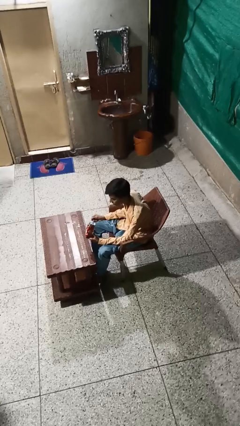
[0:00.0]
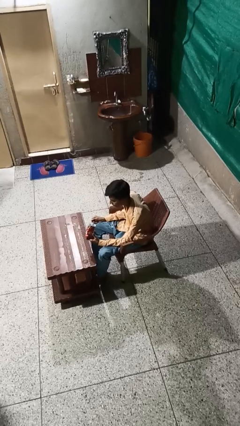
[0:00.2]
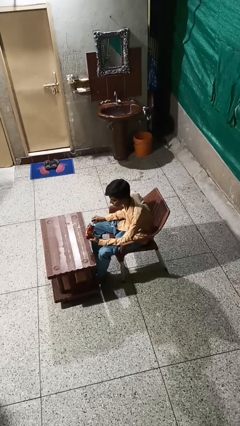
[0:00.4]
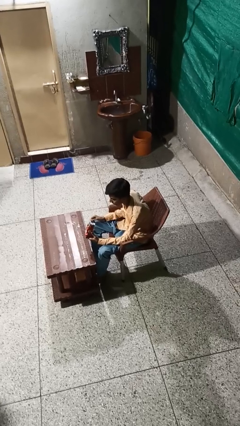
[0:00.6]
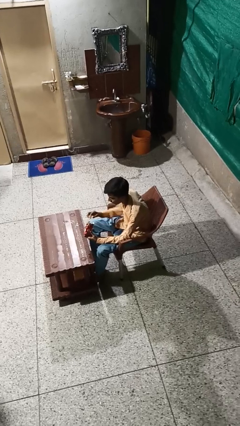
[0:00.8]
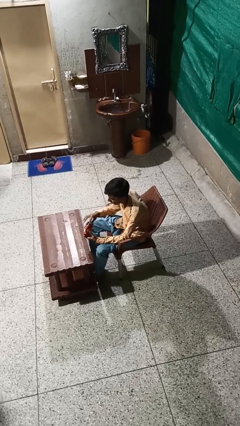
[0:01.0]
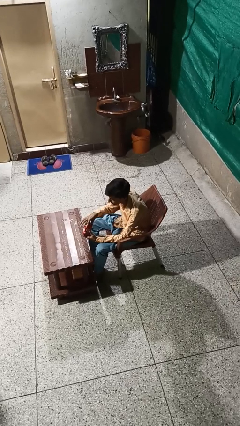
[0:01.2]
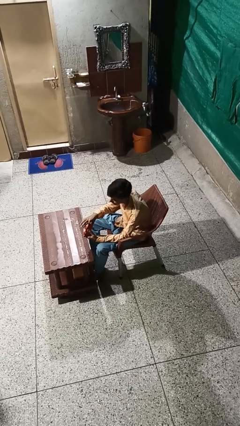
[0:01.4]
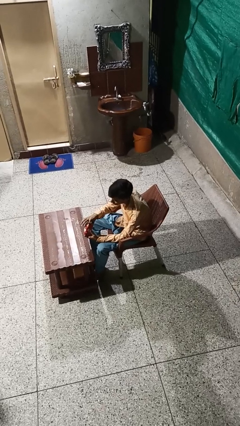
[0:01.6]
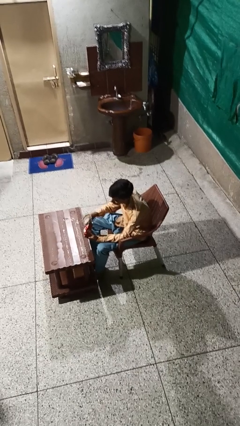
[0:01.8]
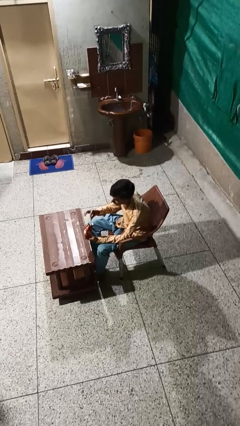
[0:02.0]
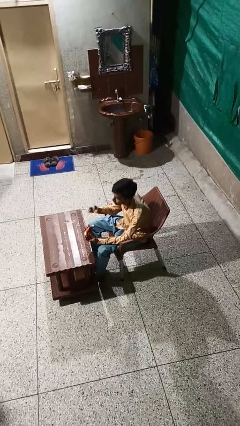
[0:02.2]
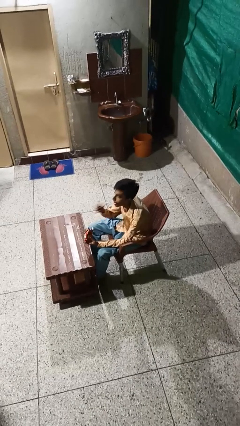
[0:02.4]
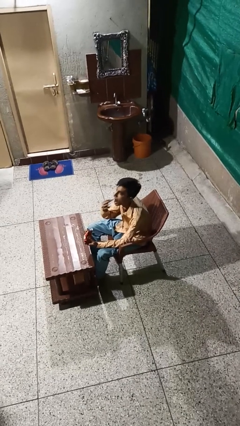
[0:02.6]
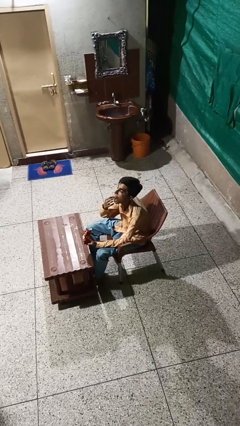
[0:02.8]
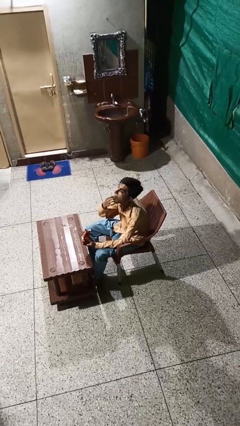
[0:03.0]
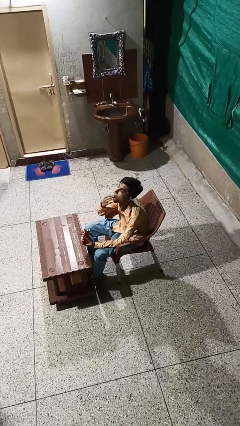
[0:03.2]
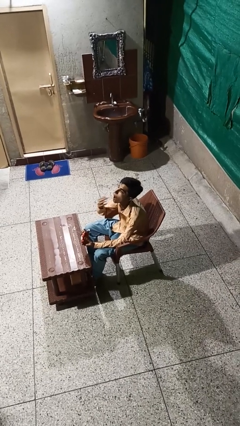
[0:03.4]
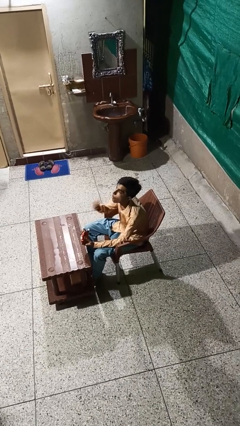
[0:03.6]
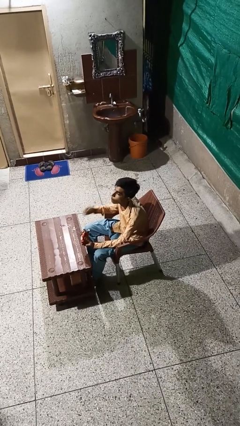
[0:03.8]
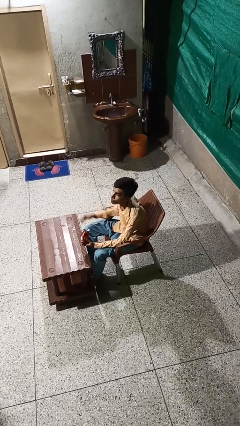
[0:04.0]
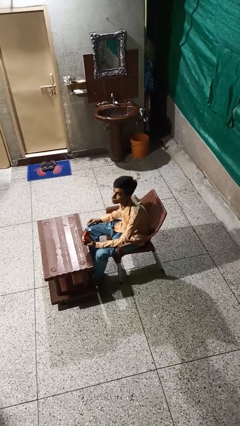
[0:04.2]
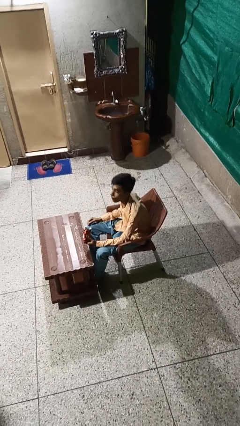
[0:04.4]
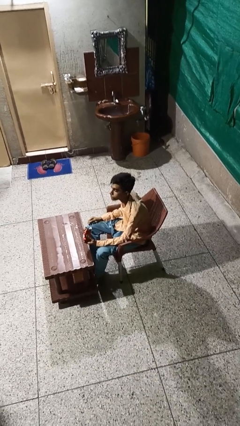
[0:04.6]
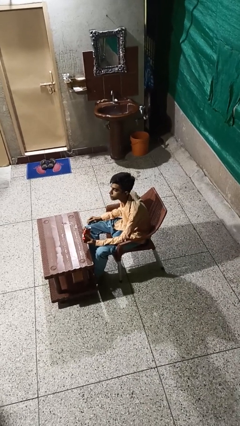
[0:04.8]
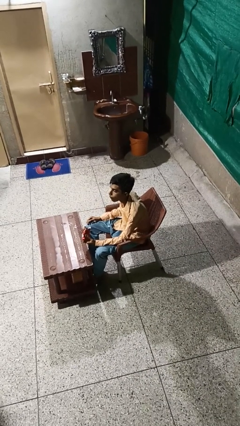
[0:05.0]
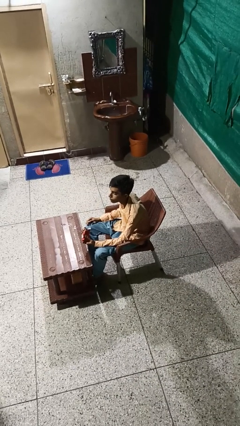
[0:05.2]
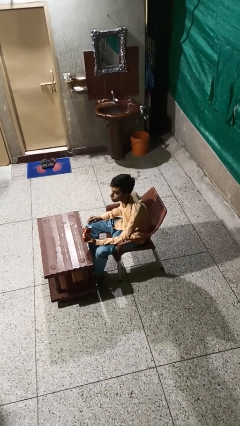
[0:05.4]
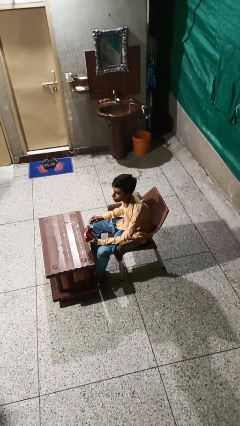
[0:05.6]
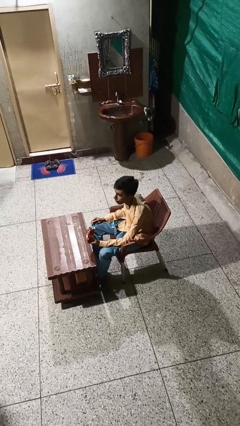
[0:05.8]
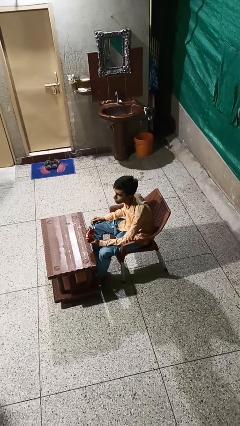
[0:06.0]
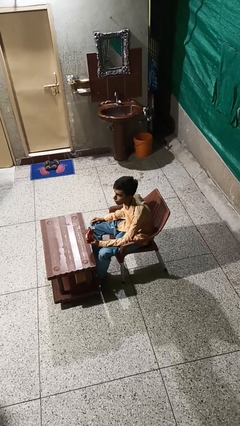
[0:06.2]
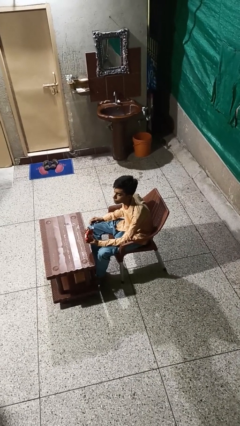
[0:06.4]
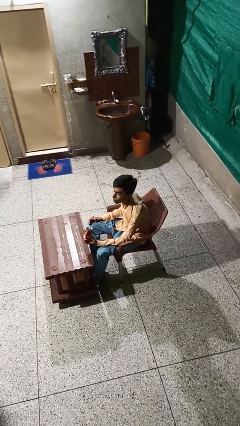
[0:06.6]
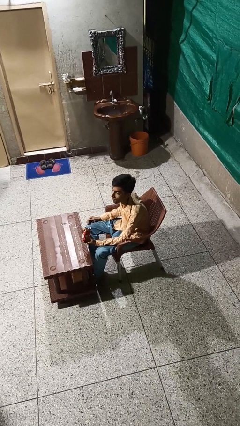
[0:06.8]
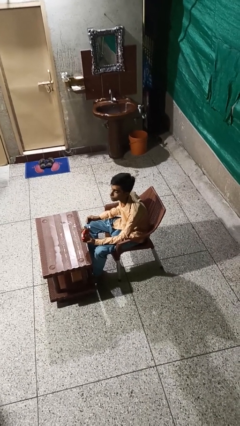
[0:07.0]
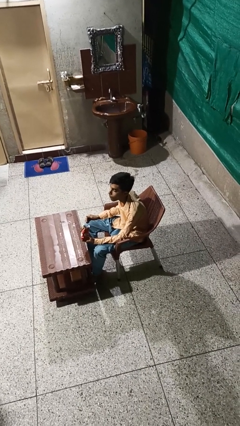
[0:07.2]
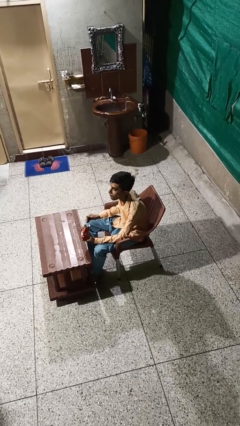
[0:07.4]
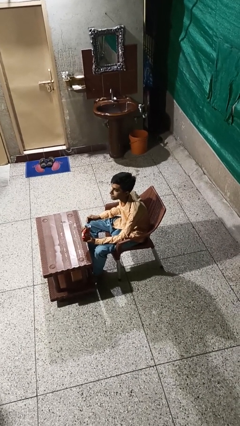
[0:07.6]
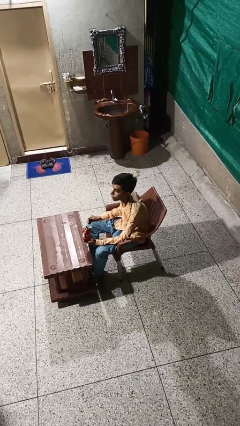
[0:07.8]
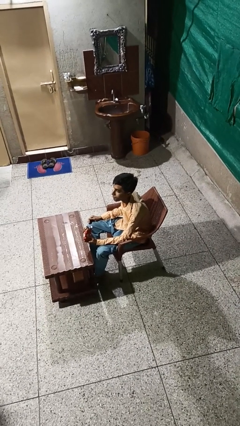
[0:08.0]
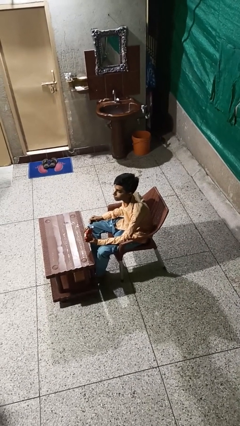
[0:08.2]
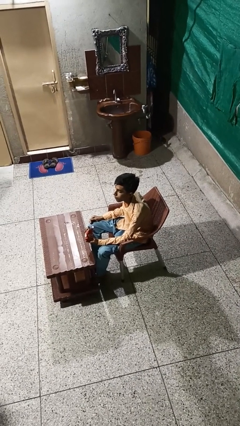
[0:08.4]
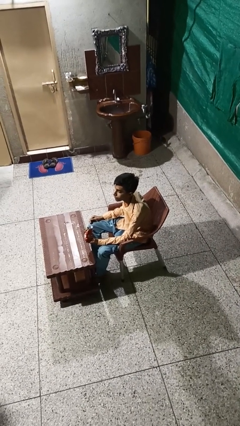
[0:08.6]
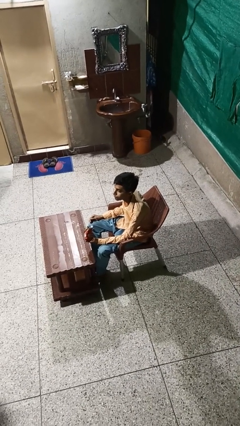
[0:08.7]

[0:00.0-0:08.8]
person eats snack from bag

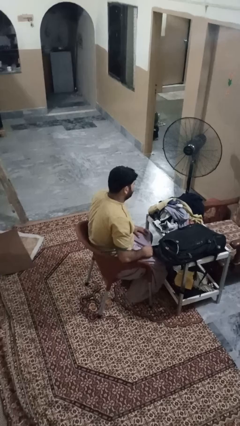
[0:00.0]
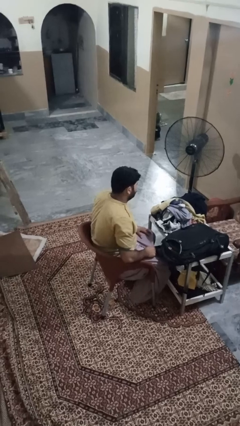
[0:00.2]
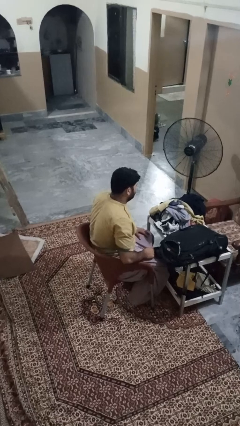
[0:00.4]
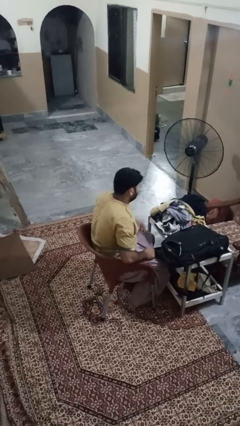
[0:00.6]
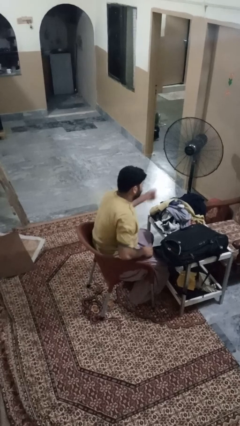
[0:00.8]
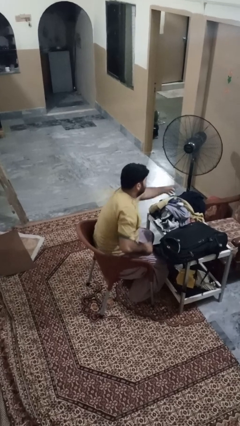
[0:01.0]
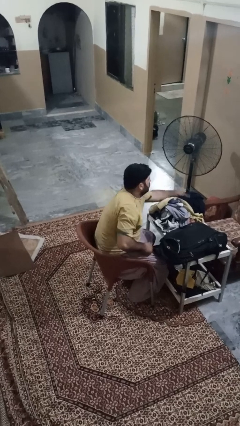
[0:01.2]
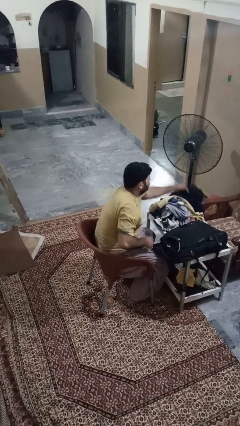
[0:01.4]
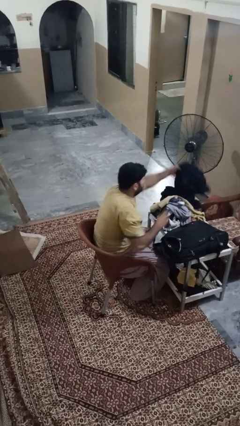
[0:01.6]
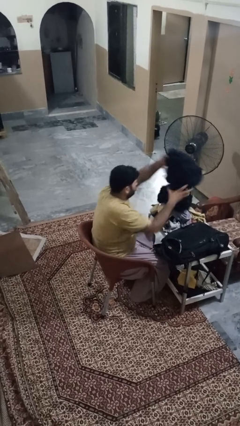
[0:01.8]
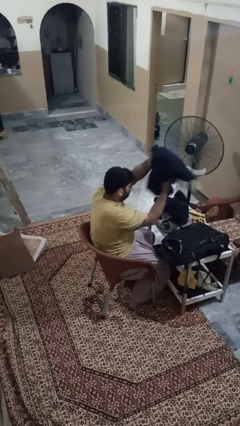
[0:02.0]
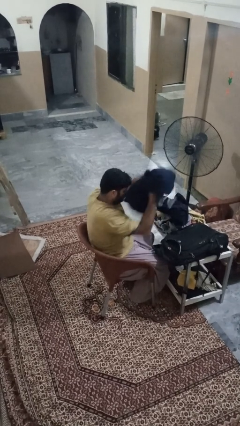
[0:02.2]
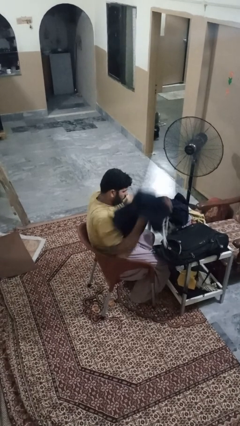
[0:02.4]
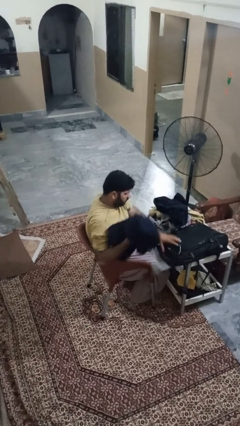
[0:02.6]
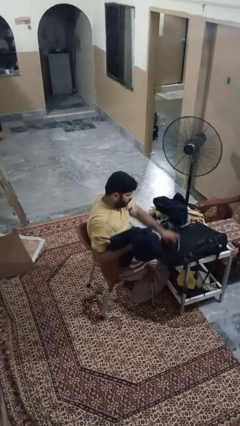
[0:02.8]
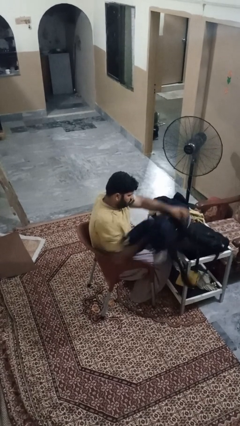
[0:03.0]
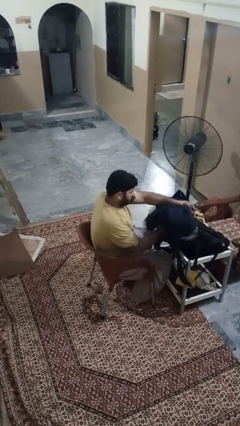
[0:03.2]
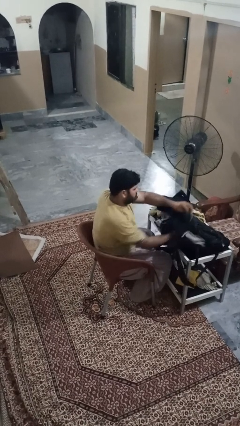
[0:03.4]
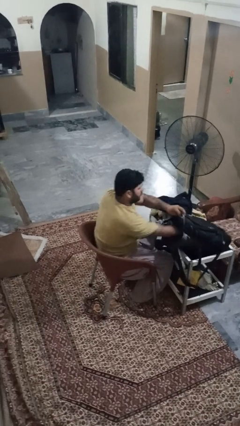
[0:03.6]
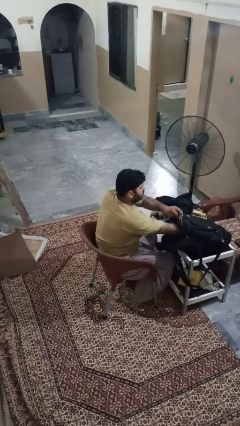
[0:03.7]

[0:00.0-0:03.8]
person loads clothes into suitcase

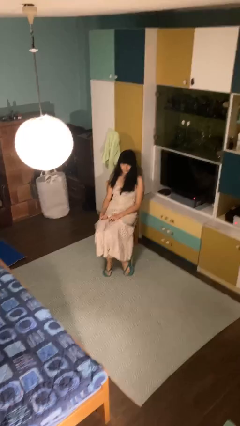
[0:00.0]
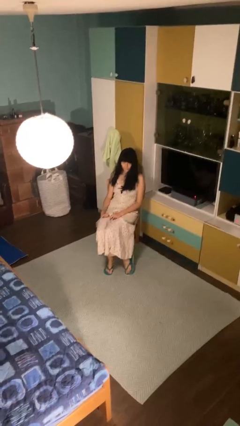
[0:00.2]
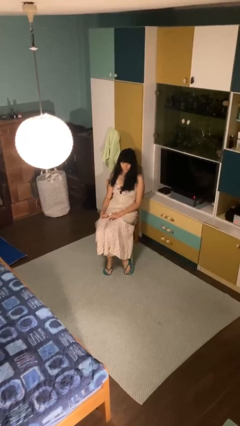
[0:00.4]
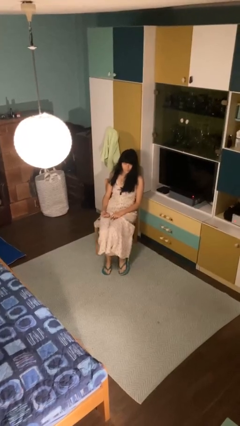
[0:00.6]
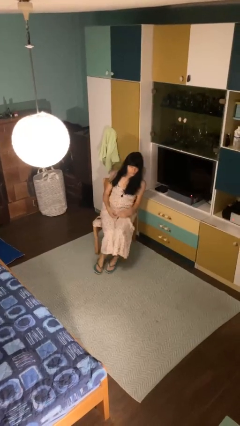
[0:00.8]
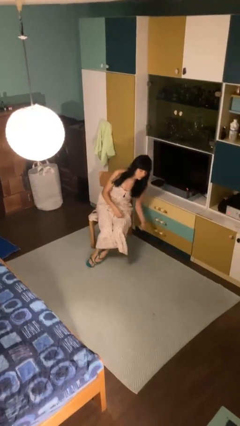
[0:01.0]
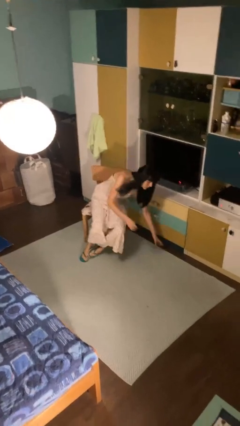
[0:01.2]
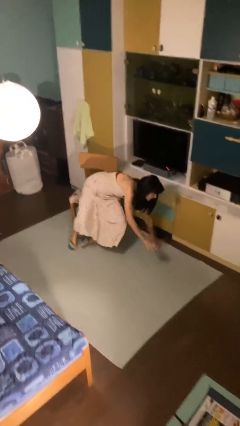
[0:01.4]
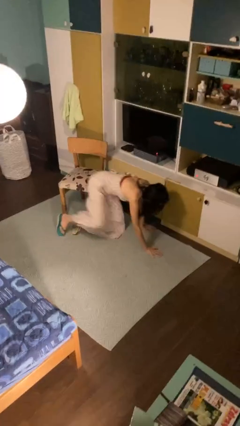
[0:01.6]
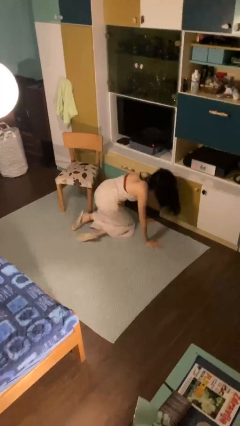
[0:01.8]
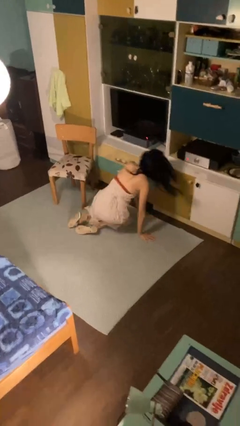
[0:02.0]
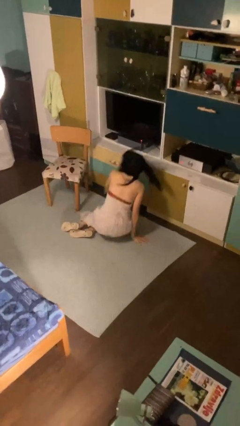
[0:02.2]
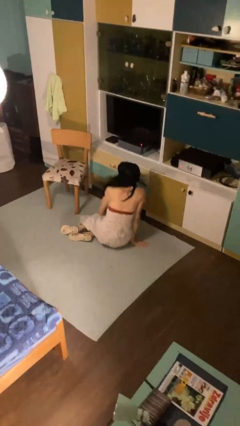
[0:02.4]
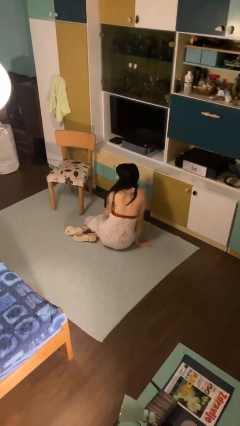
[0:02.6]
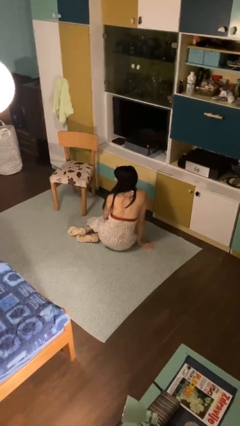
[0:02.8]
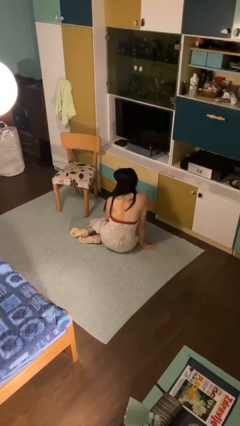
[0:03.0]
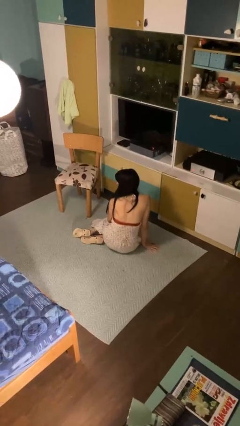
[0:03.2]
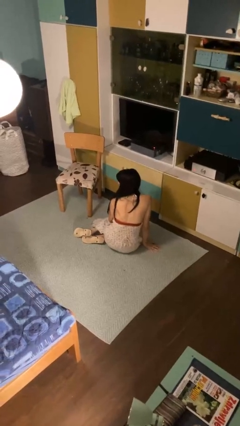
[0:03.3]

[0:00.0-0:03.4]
person falls from chair

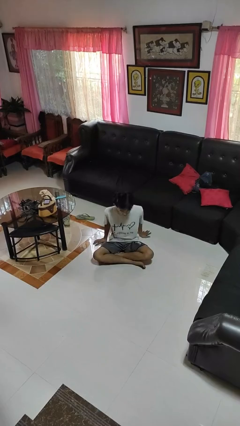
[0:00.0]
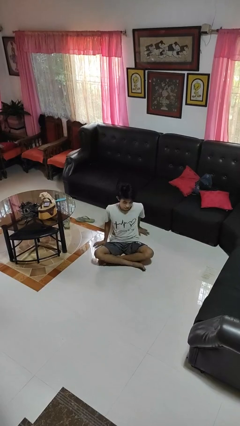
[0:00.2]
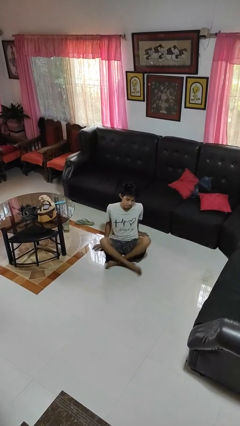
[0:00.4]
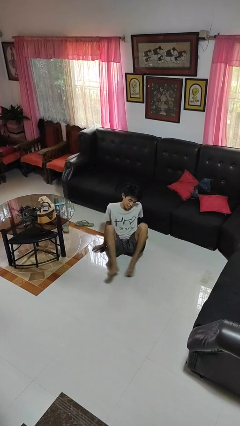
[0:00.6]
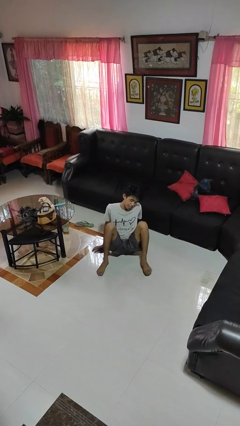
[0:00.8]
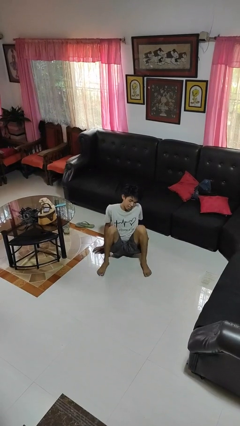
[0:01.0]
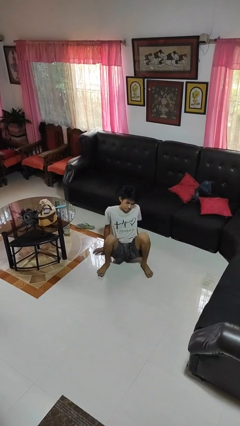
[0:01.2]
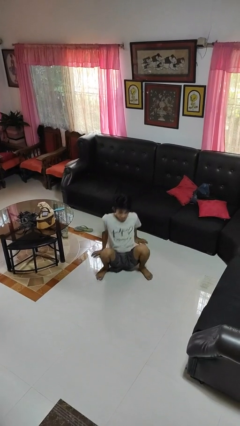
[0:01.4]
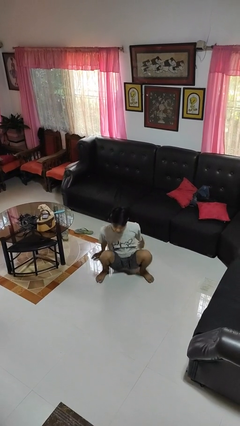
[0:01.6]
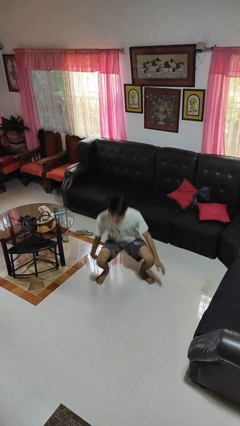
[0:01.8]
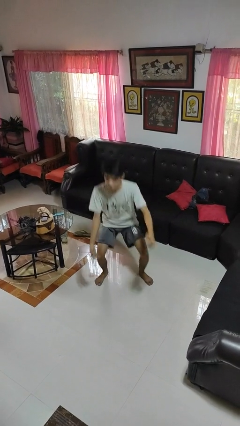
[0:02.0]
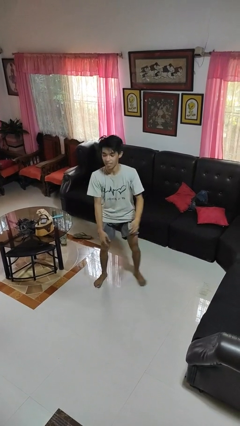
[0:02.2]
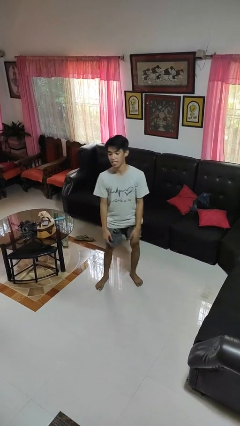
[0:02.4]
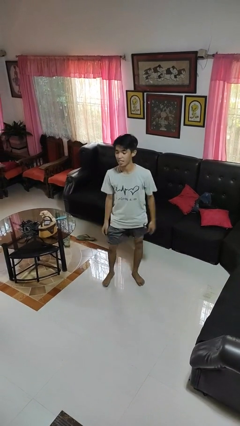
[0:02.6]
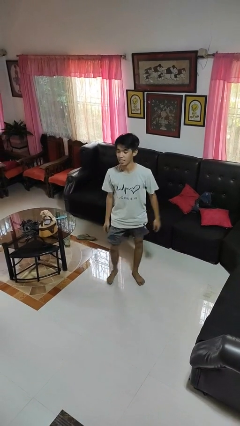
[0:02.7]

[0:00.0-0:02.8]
person stands up from floor
